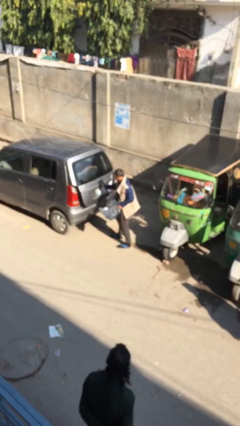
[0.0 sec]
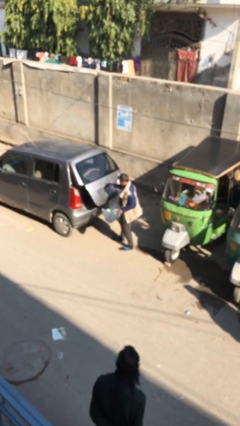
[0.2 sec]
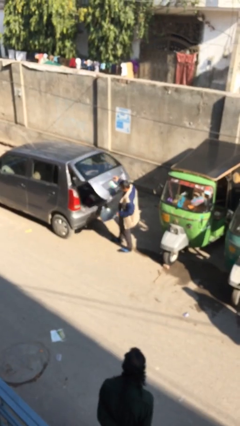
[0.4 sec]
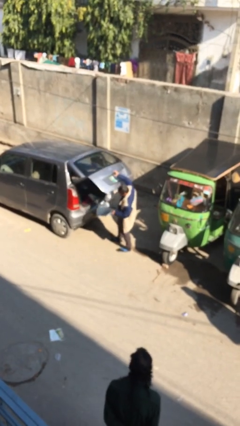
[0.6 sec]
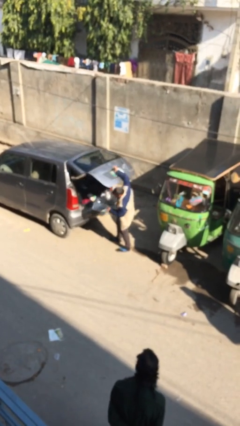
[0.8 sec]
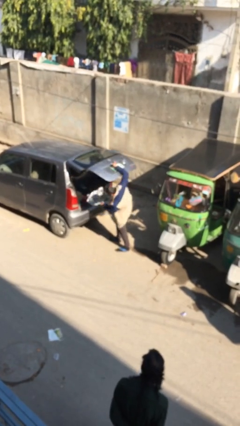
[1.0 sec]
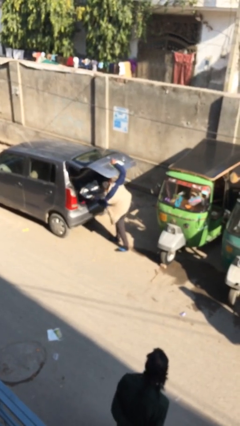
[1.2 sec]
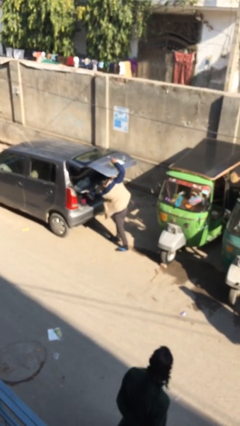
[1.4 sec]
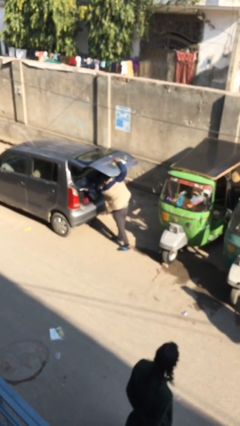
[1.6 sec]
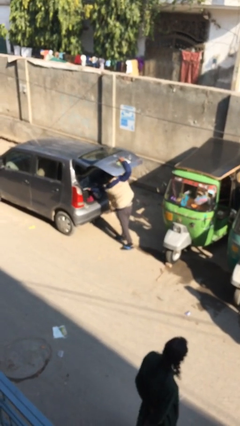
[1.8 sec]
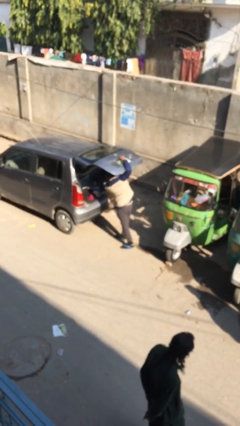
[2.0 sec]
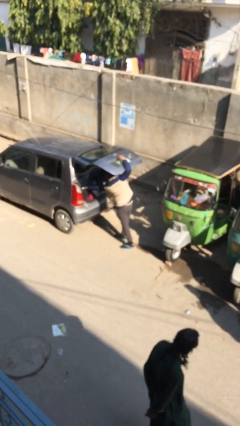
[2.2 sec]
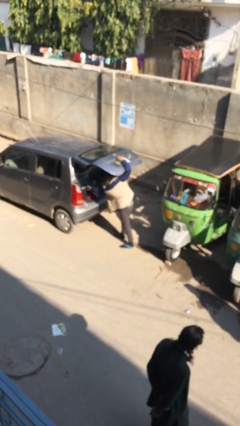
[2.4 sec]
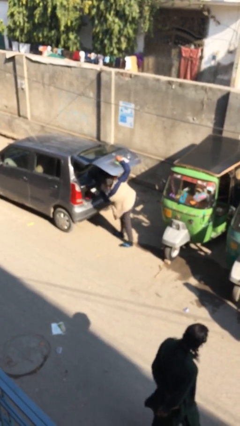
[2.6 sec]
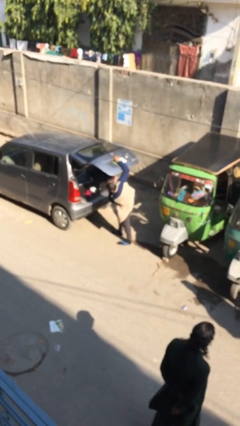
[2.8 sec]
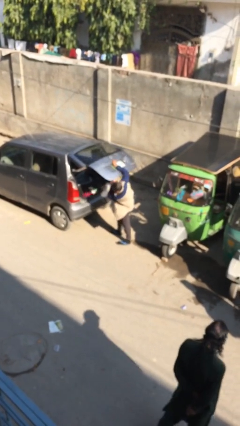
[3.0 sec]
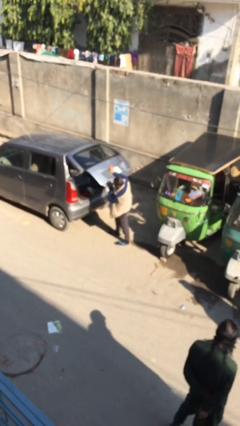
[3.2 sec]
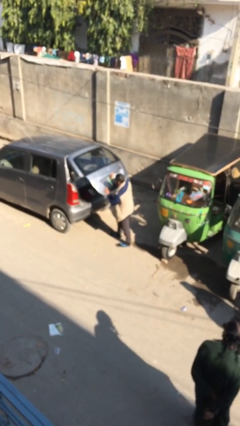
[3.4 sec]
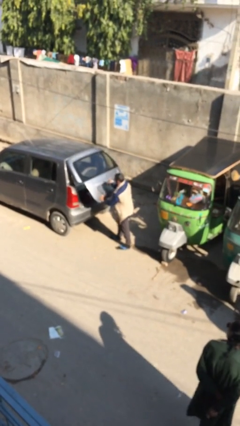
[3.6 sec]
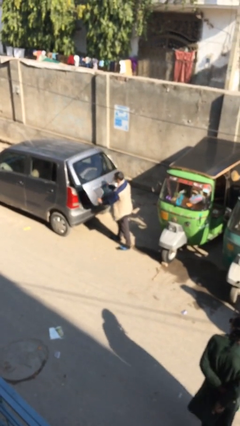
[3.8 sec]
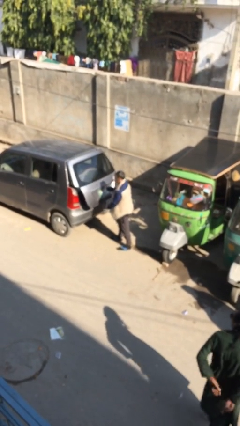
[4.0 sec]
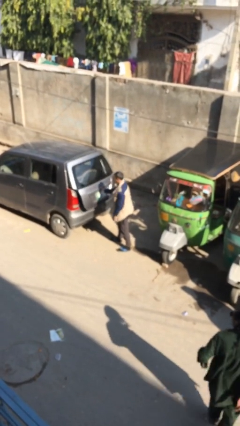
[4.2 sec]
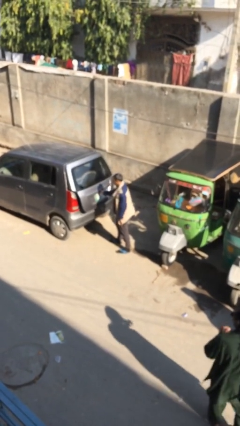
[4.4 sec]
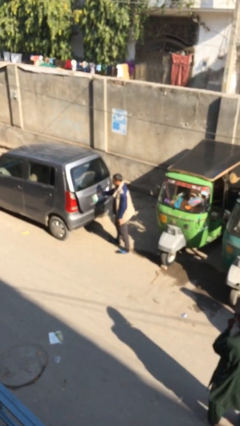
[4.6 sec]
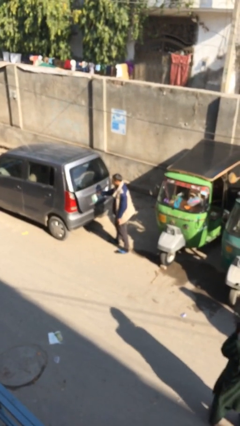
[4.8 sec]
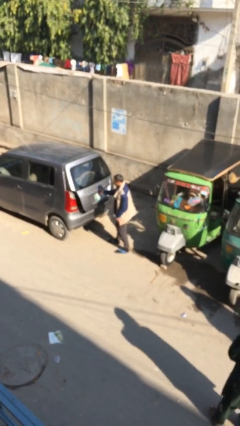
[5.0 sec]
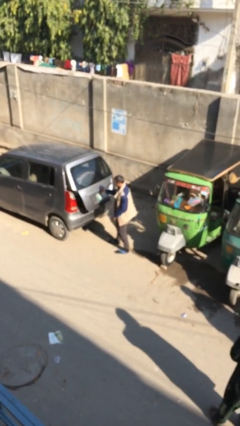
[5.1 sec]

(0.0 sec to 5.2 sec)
person loads car

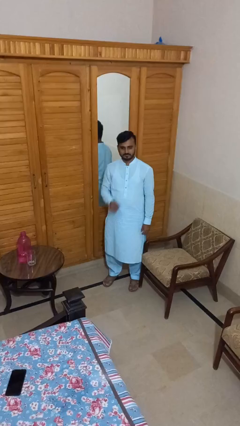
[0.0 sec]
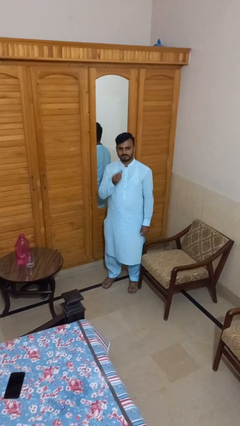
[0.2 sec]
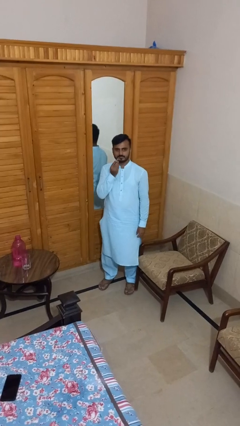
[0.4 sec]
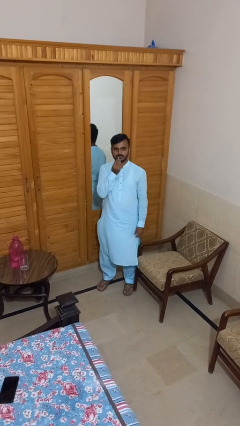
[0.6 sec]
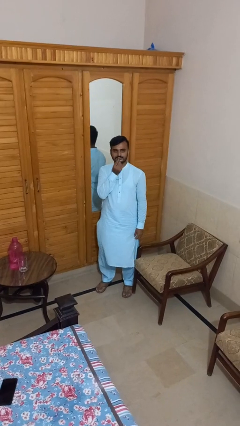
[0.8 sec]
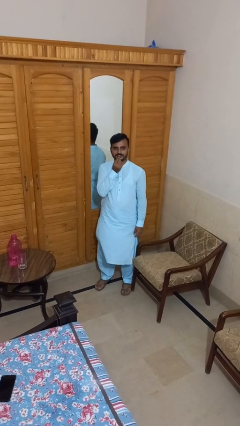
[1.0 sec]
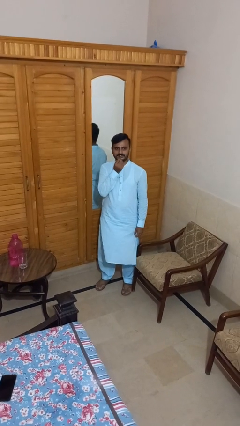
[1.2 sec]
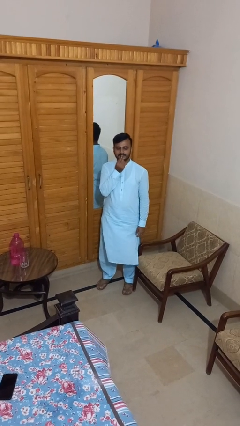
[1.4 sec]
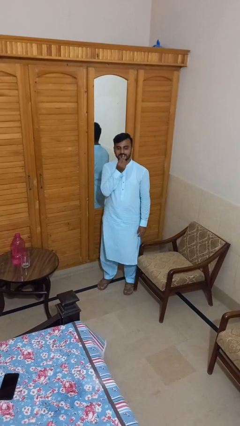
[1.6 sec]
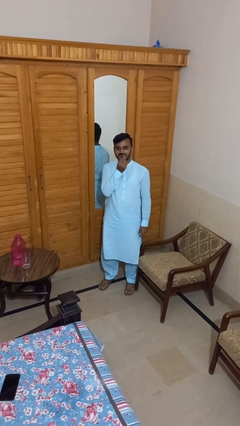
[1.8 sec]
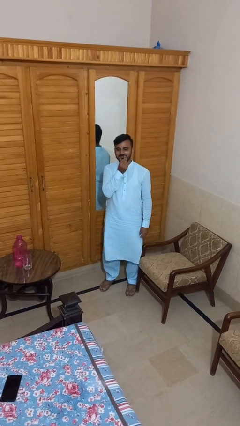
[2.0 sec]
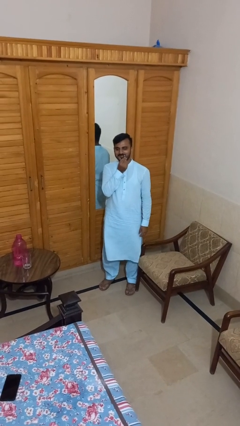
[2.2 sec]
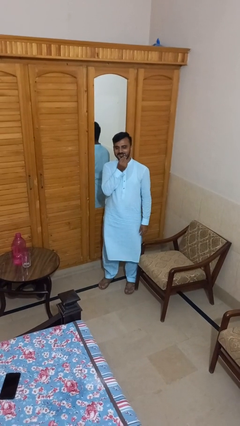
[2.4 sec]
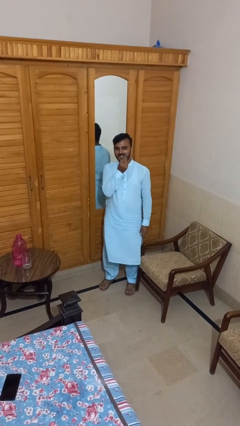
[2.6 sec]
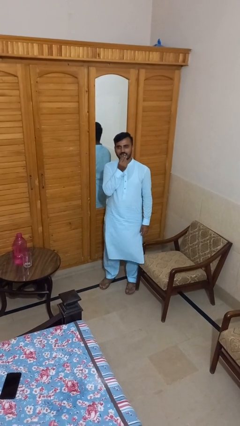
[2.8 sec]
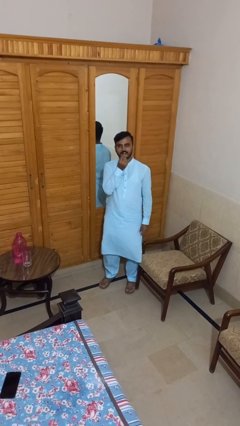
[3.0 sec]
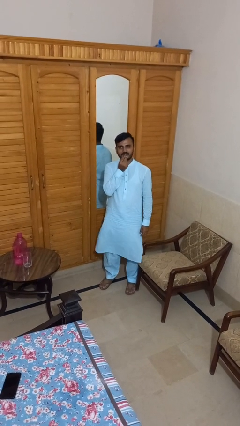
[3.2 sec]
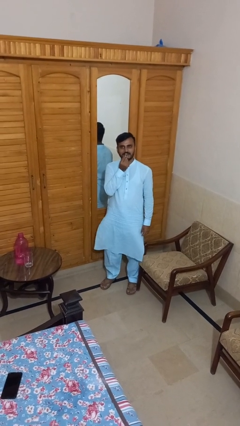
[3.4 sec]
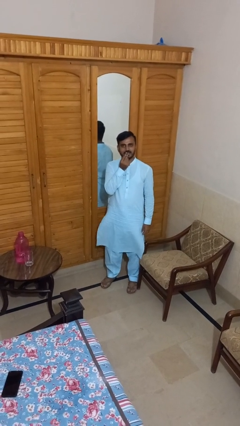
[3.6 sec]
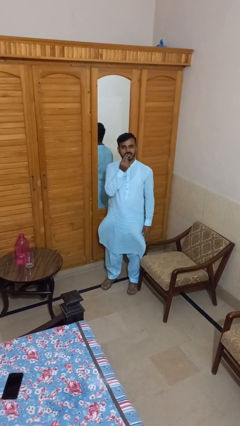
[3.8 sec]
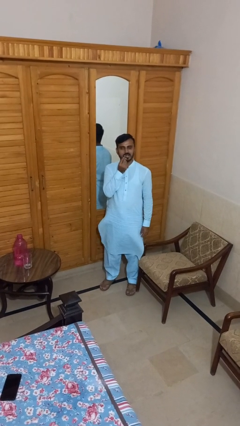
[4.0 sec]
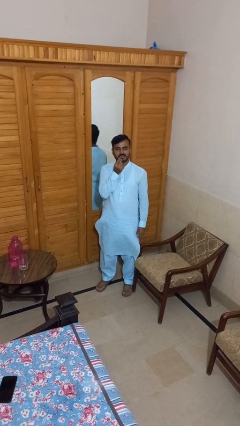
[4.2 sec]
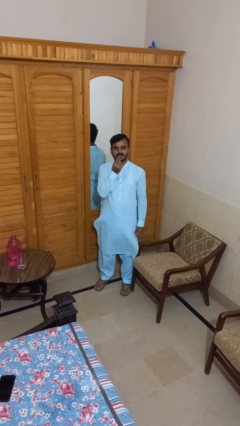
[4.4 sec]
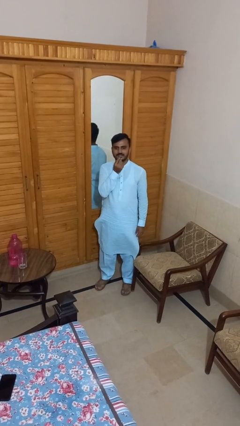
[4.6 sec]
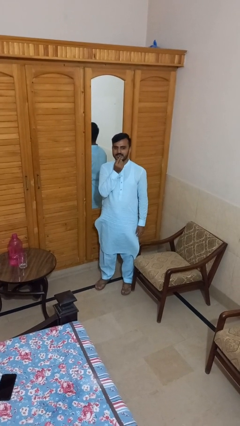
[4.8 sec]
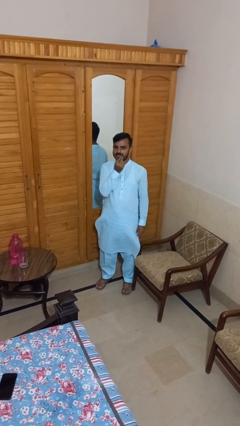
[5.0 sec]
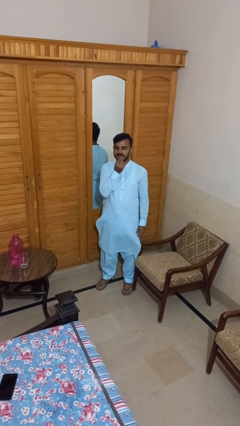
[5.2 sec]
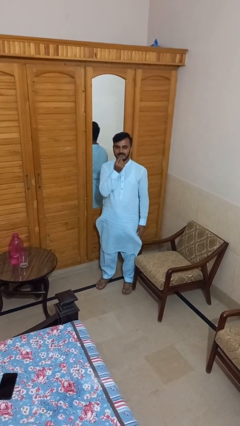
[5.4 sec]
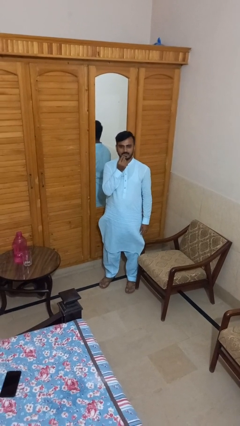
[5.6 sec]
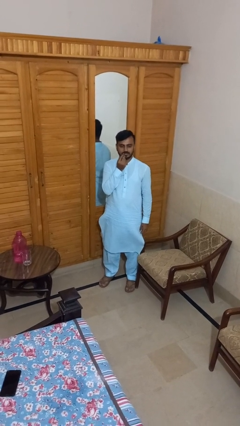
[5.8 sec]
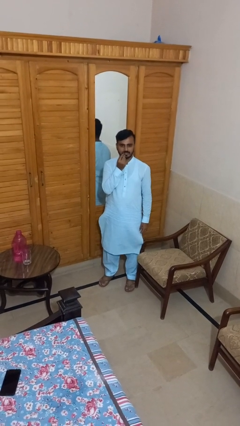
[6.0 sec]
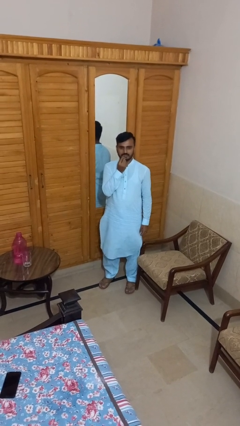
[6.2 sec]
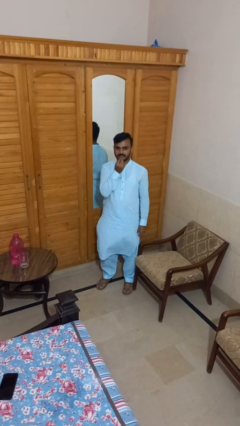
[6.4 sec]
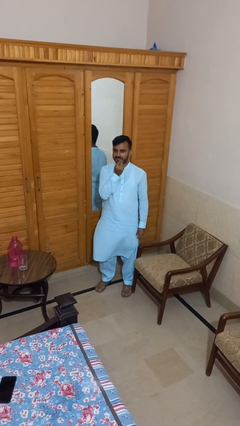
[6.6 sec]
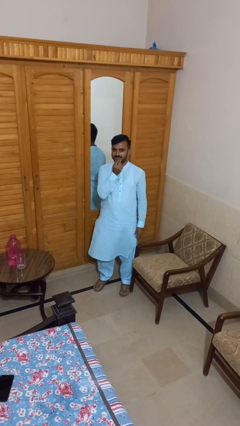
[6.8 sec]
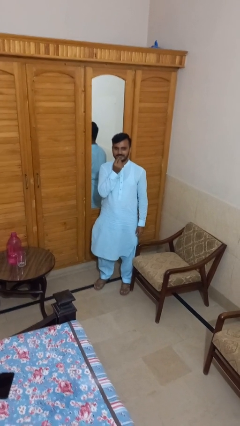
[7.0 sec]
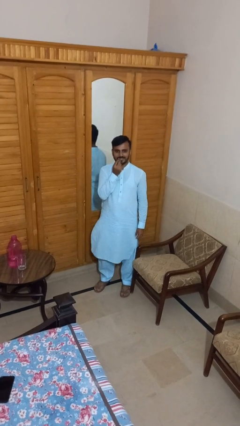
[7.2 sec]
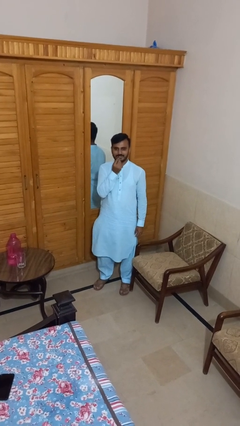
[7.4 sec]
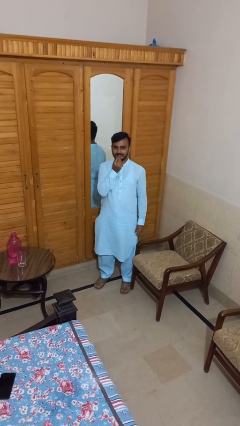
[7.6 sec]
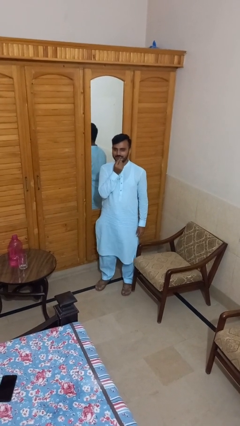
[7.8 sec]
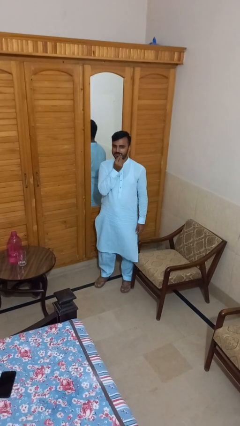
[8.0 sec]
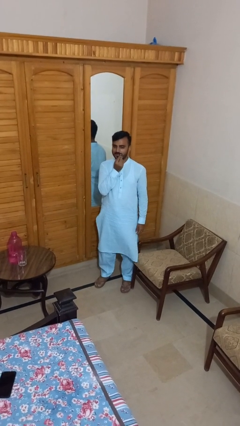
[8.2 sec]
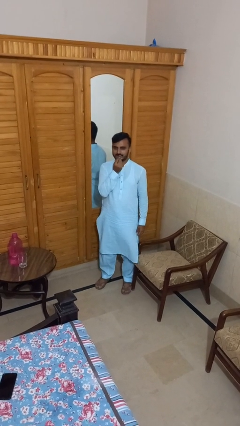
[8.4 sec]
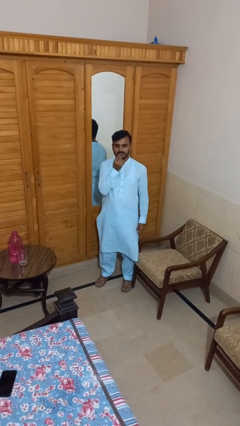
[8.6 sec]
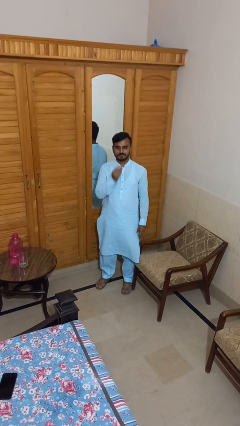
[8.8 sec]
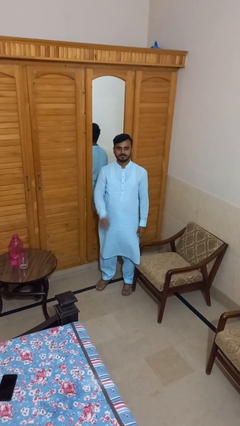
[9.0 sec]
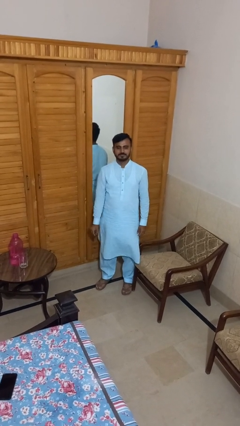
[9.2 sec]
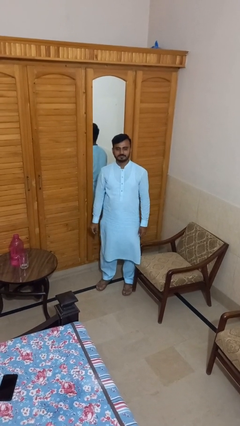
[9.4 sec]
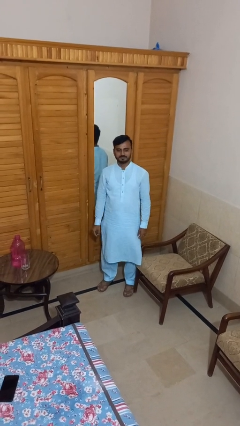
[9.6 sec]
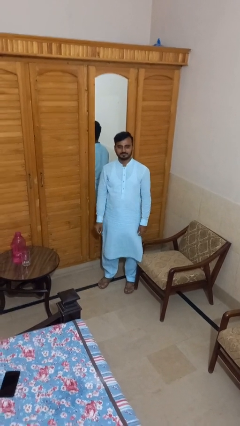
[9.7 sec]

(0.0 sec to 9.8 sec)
person applies lip makeup

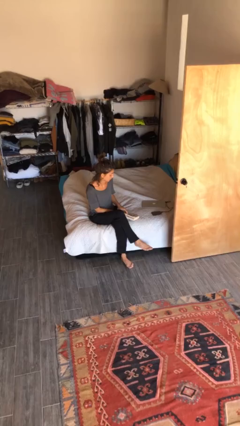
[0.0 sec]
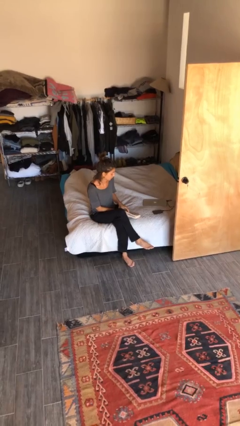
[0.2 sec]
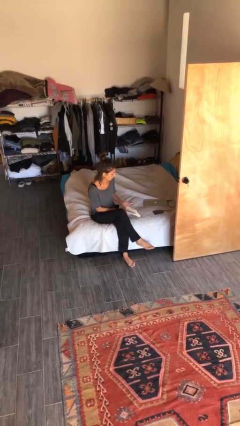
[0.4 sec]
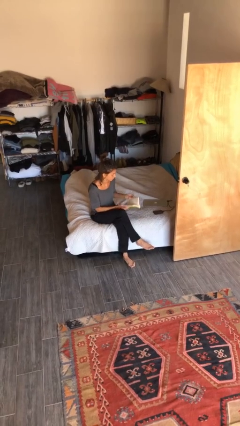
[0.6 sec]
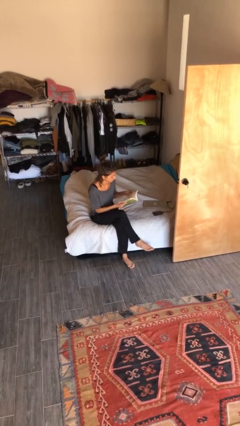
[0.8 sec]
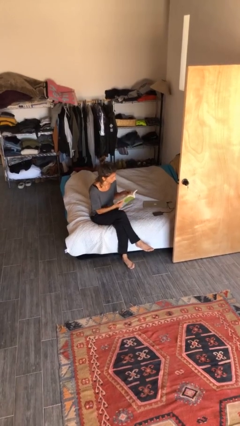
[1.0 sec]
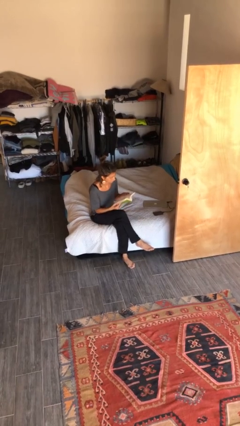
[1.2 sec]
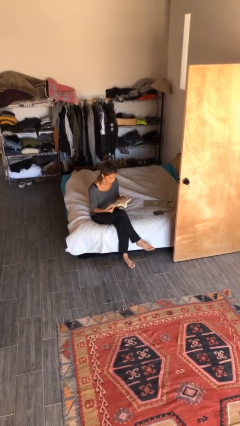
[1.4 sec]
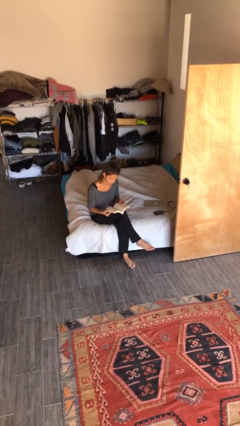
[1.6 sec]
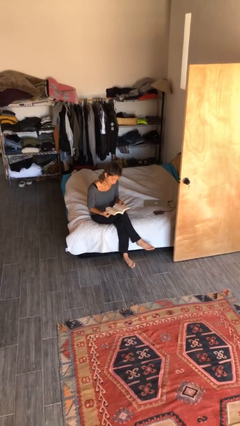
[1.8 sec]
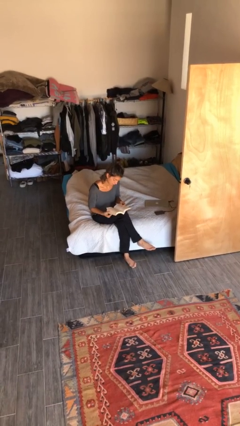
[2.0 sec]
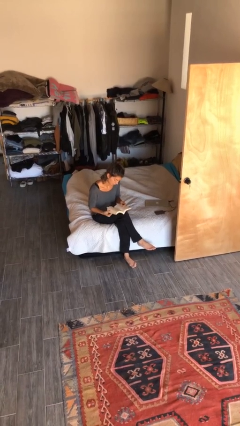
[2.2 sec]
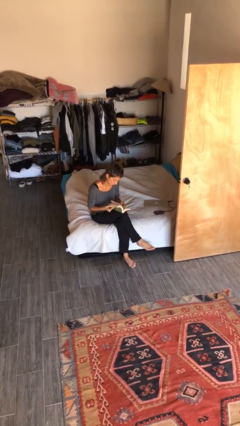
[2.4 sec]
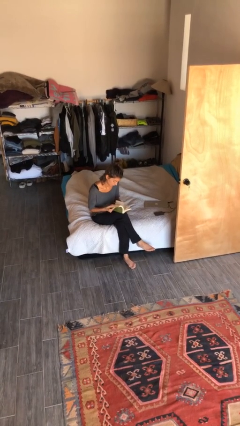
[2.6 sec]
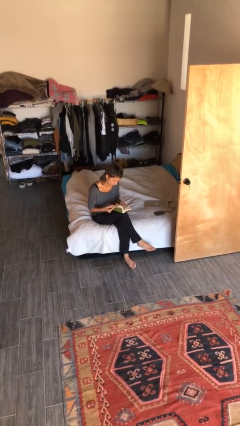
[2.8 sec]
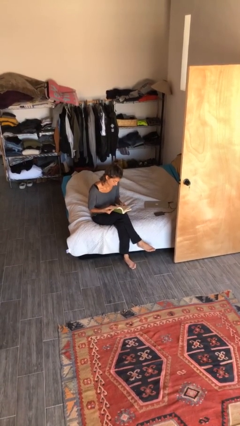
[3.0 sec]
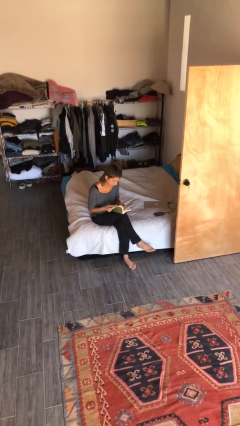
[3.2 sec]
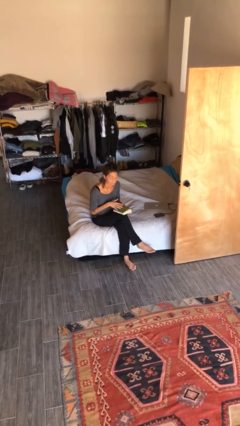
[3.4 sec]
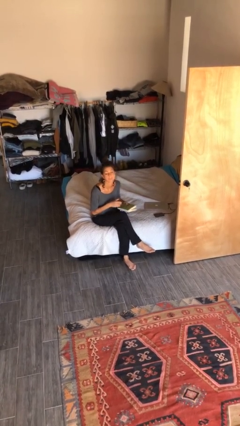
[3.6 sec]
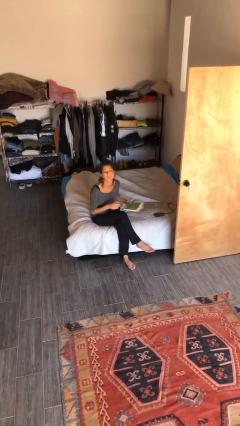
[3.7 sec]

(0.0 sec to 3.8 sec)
person reads document
